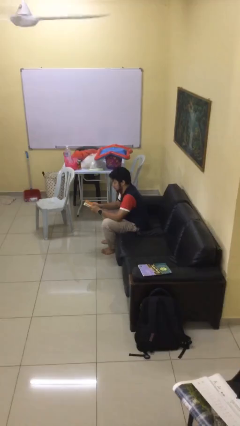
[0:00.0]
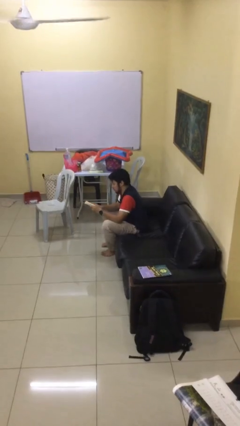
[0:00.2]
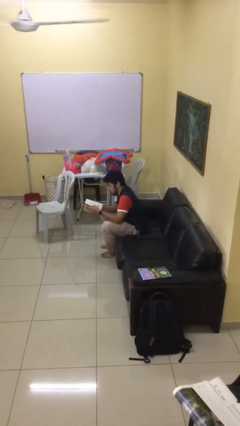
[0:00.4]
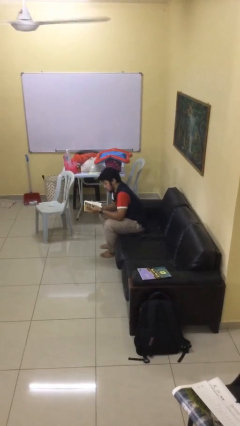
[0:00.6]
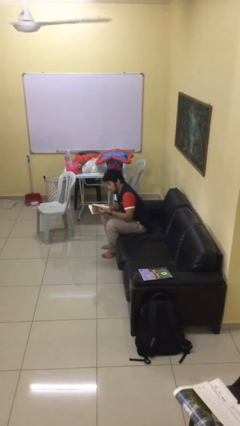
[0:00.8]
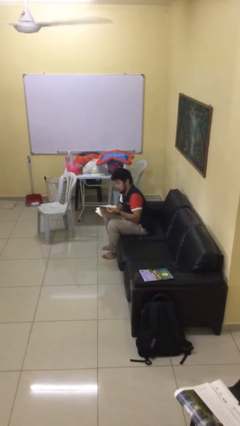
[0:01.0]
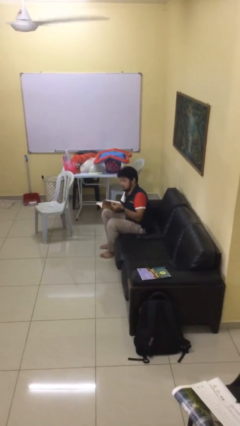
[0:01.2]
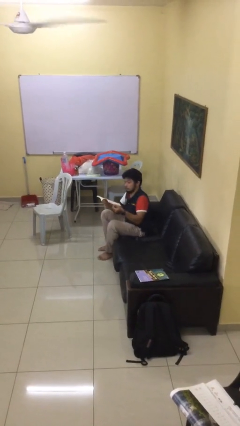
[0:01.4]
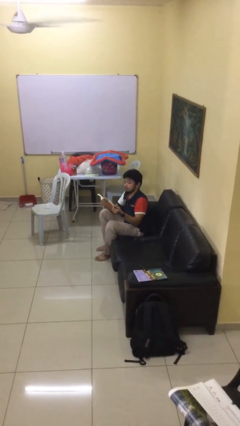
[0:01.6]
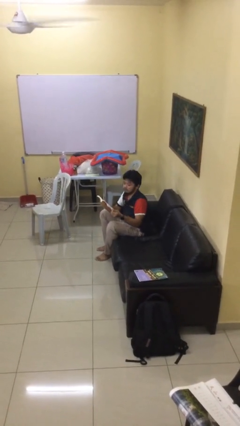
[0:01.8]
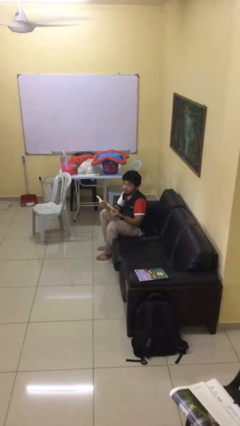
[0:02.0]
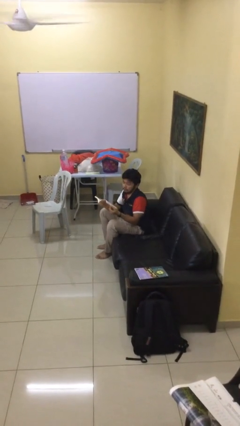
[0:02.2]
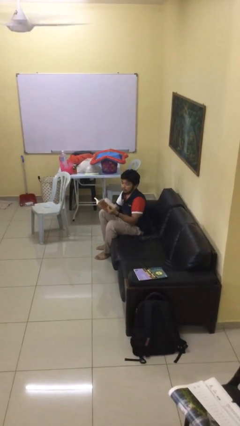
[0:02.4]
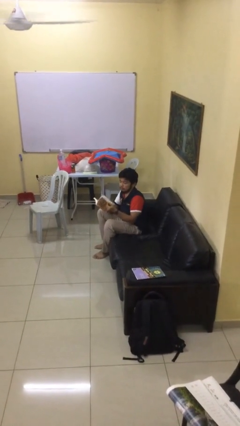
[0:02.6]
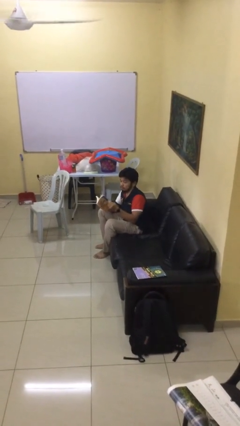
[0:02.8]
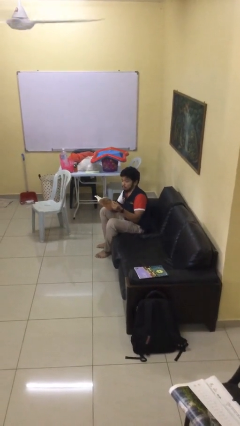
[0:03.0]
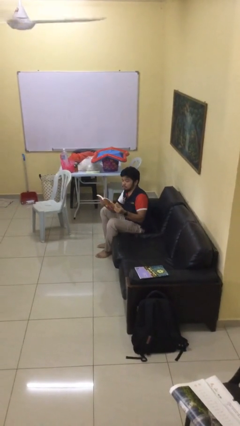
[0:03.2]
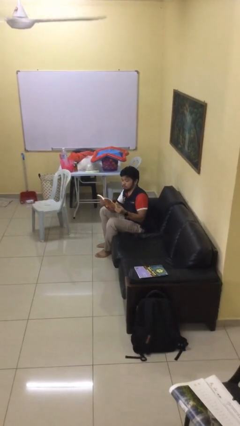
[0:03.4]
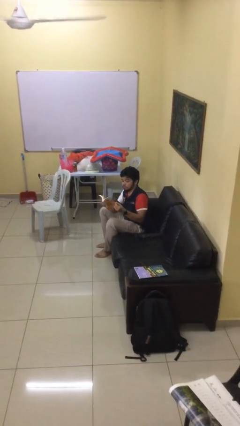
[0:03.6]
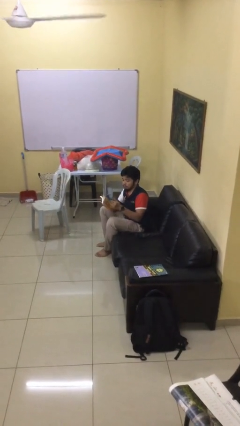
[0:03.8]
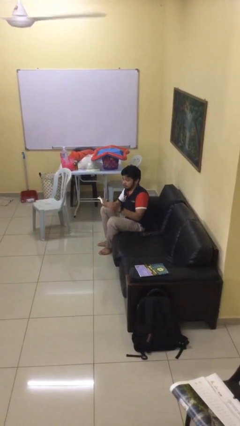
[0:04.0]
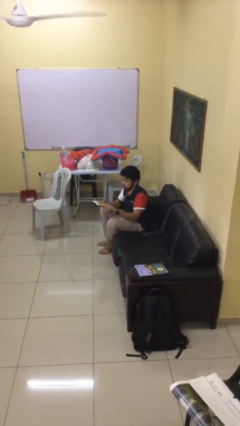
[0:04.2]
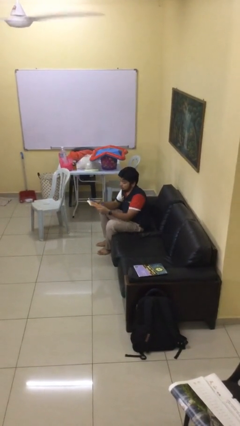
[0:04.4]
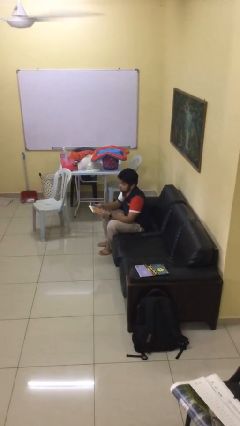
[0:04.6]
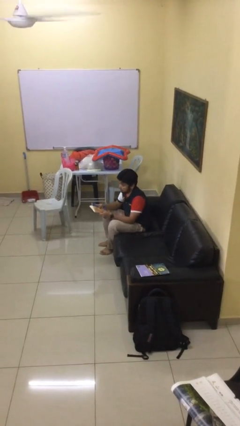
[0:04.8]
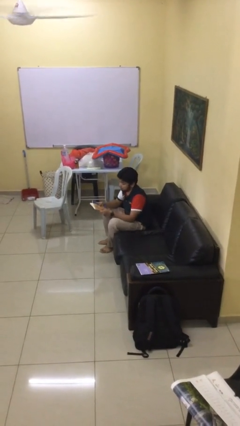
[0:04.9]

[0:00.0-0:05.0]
person reads book

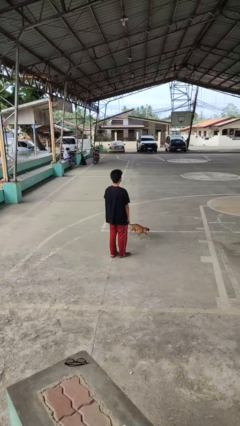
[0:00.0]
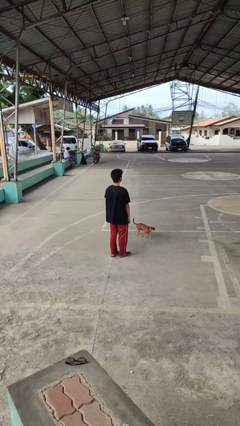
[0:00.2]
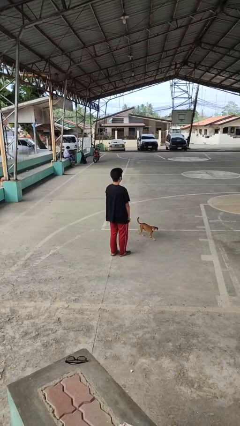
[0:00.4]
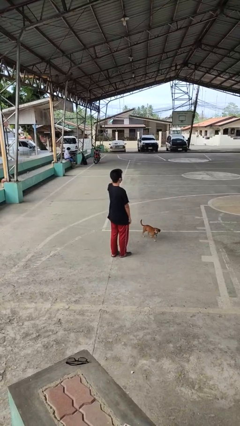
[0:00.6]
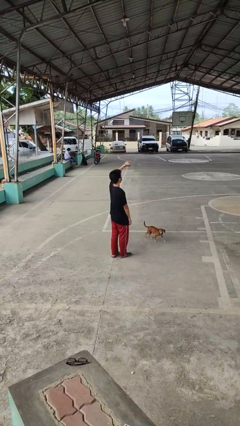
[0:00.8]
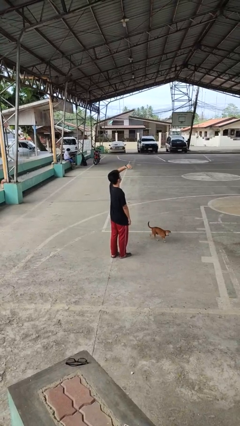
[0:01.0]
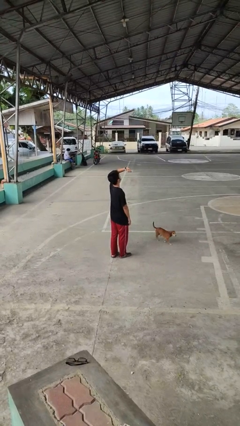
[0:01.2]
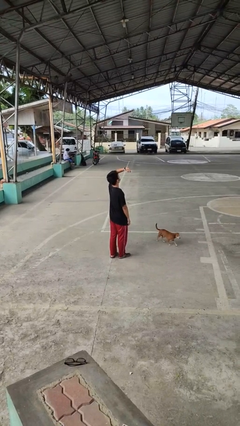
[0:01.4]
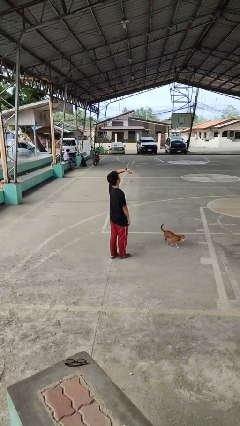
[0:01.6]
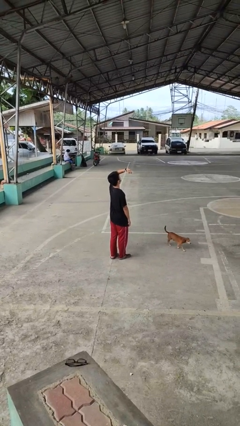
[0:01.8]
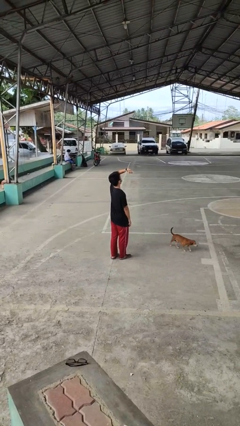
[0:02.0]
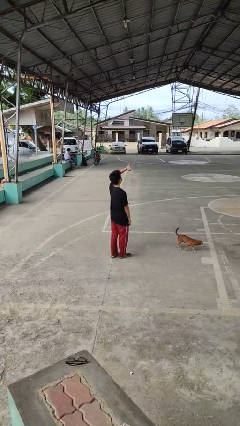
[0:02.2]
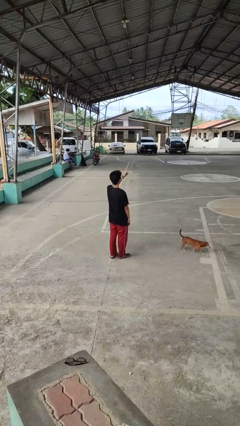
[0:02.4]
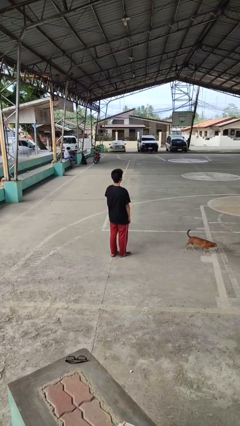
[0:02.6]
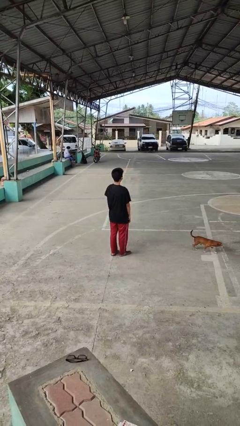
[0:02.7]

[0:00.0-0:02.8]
person looks at wristwatch

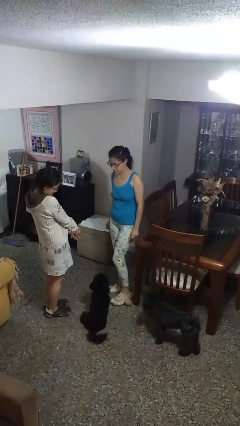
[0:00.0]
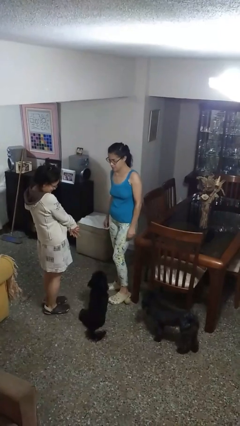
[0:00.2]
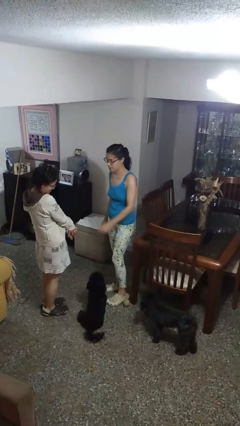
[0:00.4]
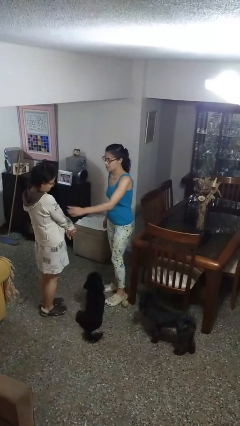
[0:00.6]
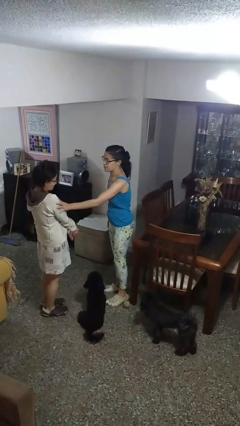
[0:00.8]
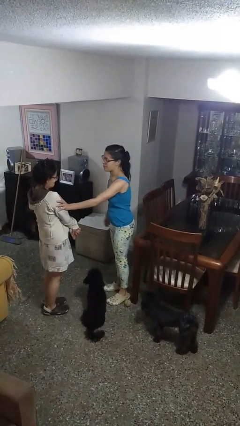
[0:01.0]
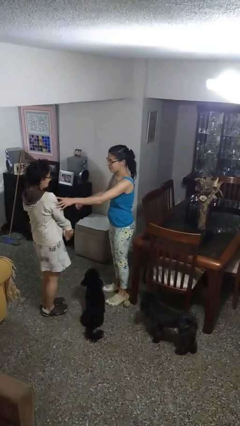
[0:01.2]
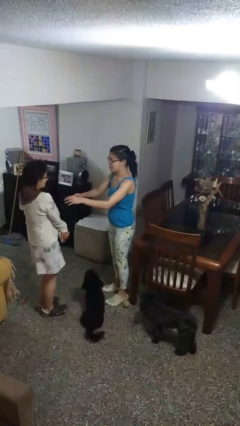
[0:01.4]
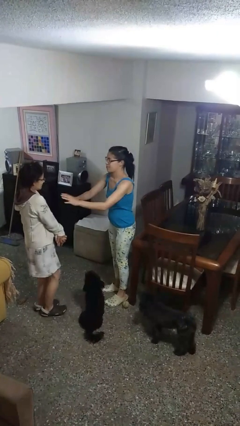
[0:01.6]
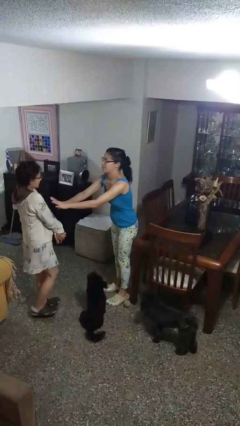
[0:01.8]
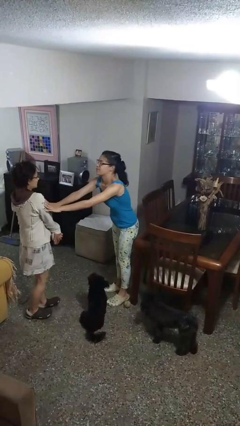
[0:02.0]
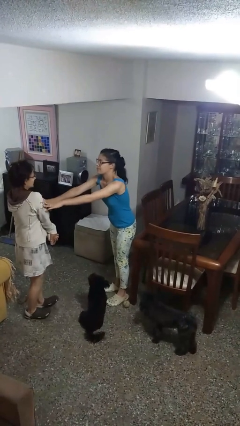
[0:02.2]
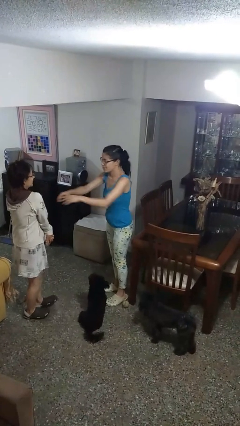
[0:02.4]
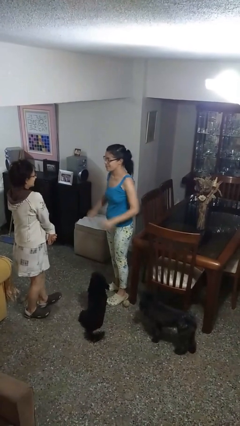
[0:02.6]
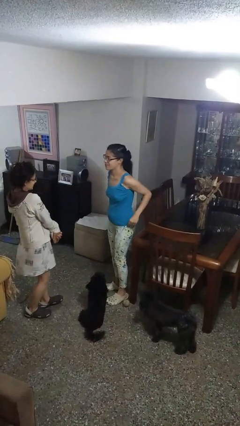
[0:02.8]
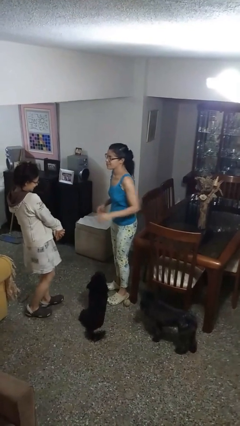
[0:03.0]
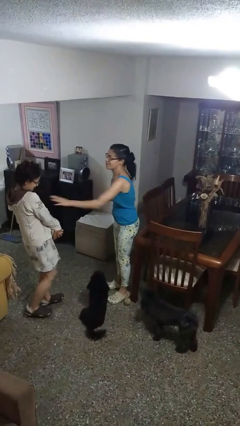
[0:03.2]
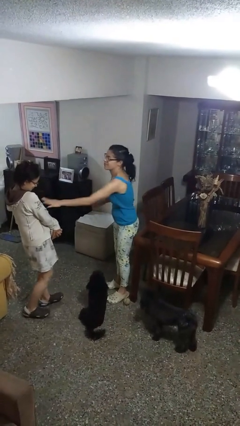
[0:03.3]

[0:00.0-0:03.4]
person shoves person

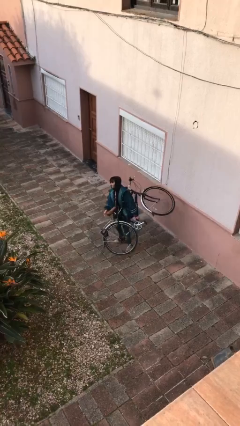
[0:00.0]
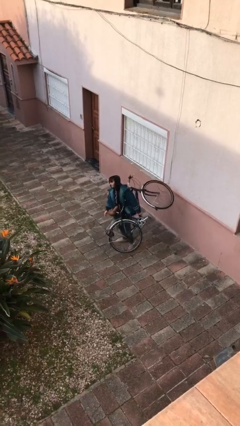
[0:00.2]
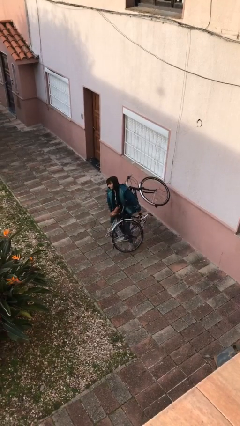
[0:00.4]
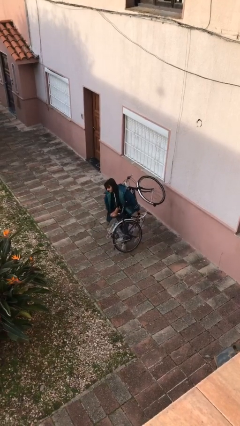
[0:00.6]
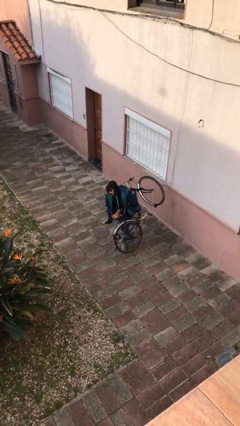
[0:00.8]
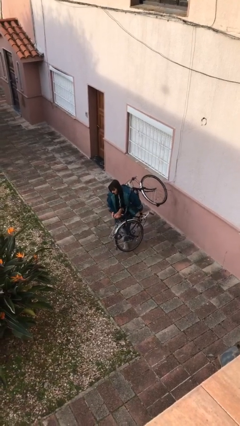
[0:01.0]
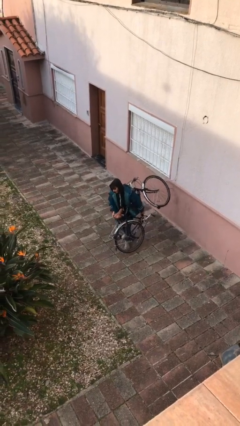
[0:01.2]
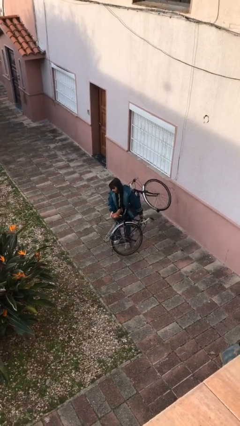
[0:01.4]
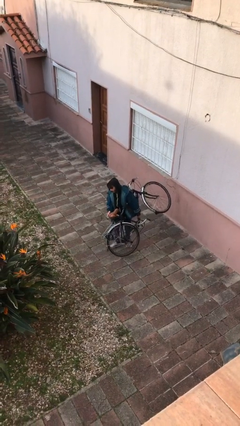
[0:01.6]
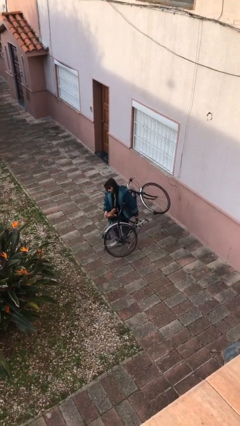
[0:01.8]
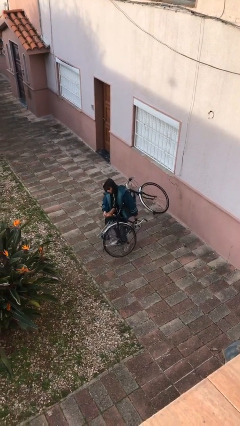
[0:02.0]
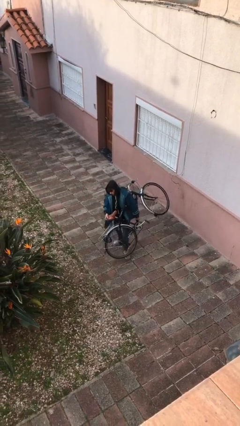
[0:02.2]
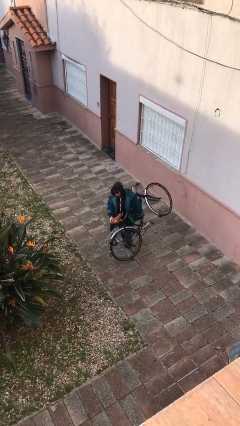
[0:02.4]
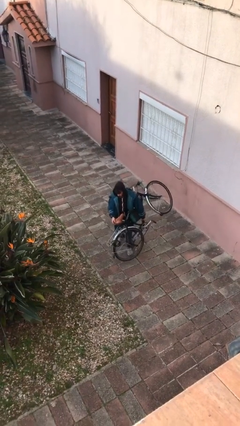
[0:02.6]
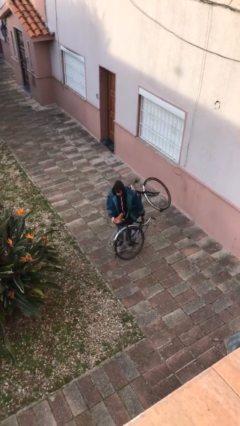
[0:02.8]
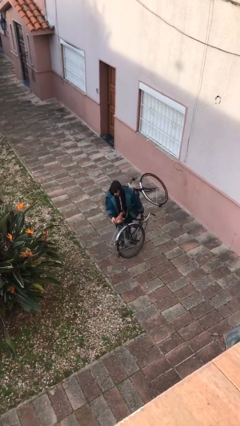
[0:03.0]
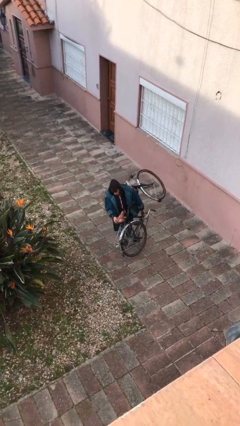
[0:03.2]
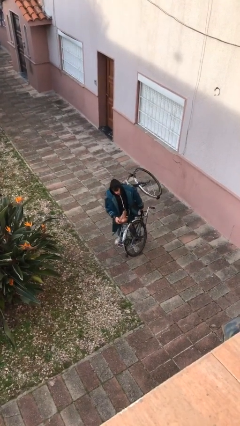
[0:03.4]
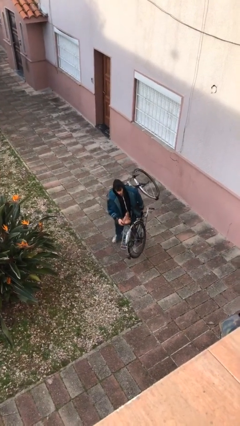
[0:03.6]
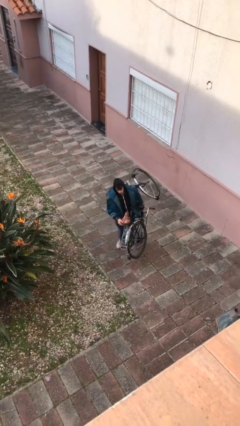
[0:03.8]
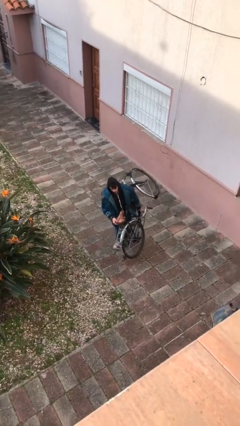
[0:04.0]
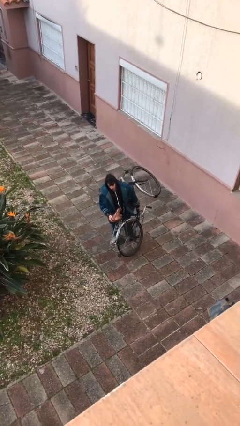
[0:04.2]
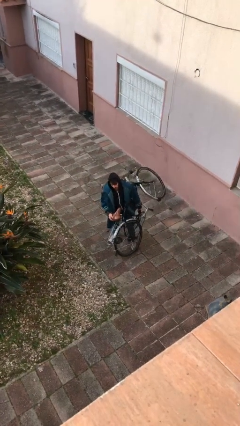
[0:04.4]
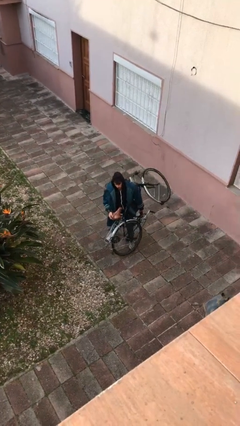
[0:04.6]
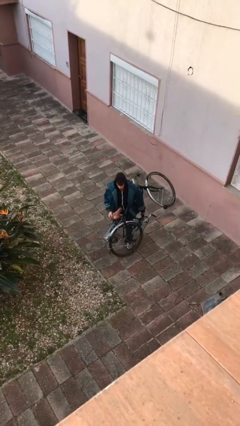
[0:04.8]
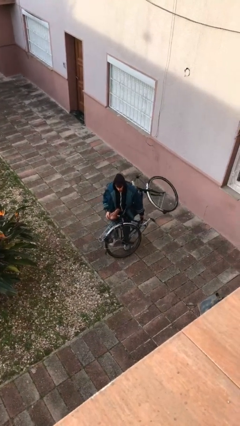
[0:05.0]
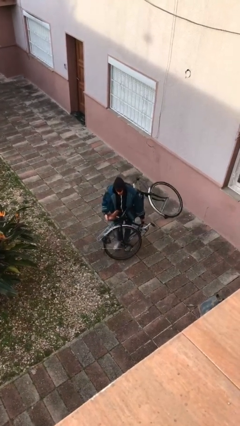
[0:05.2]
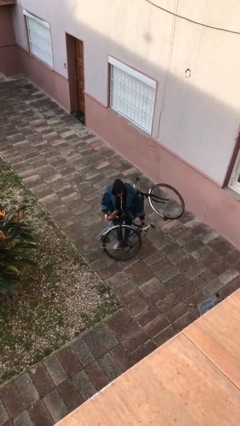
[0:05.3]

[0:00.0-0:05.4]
person carries heavy object

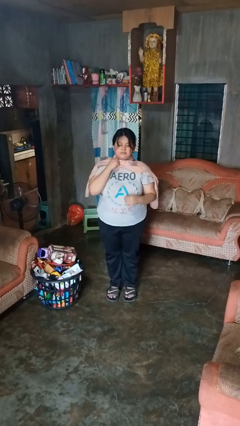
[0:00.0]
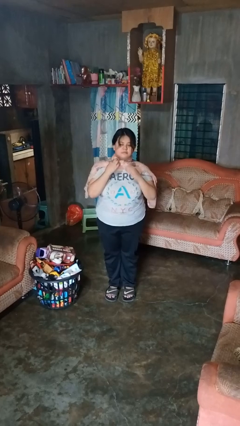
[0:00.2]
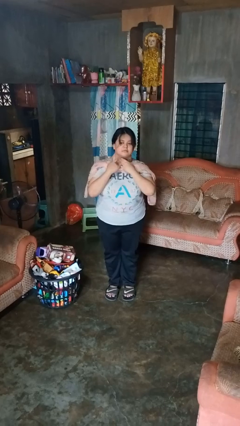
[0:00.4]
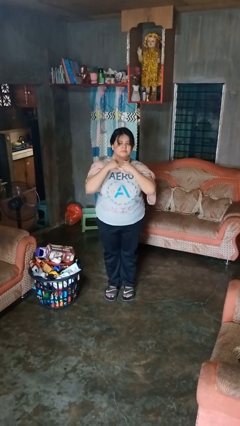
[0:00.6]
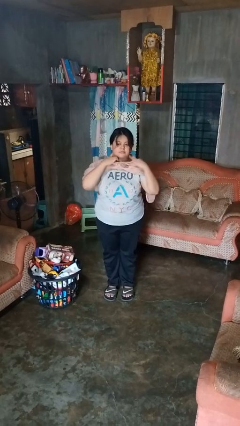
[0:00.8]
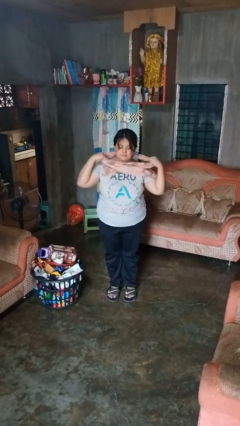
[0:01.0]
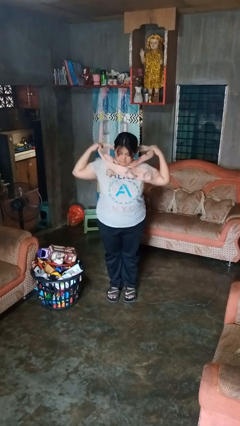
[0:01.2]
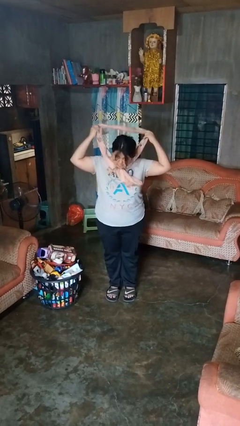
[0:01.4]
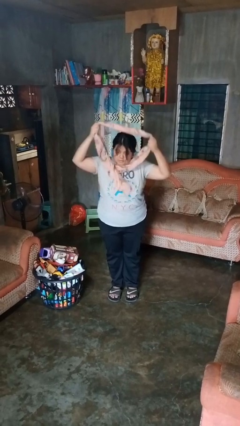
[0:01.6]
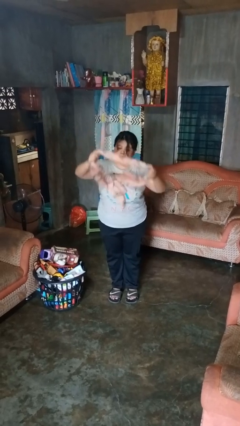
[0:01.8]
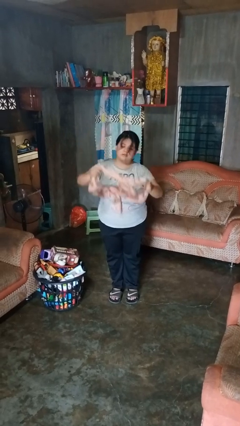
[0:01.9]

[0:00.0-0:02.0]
person takes off scarf
